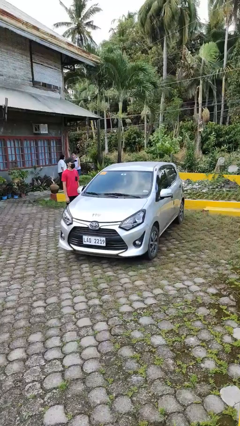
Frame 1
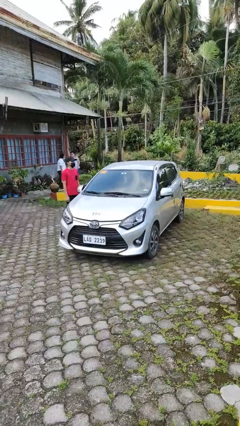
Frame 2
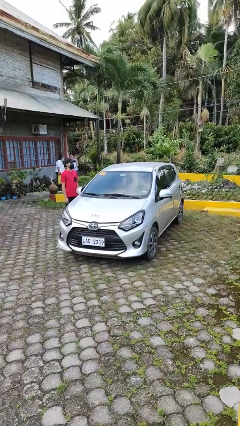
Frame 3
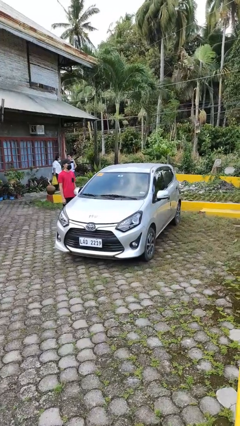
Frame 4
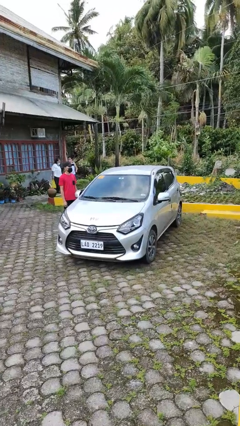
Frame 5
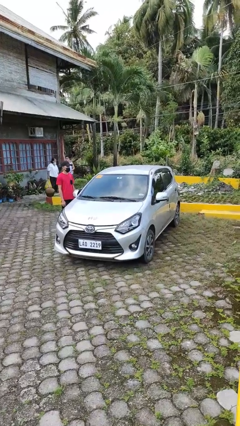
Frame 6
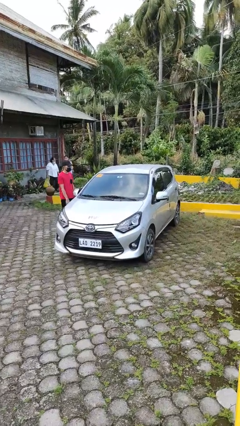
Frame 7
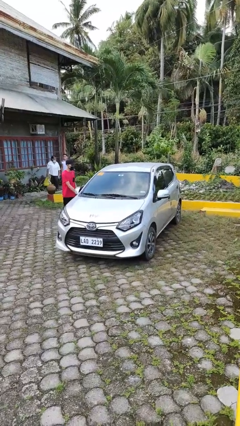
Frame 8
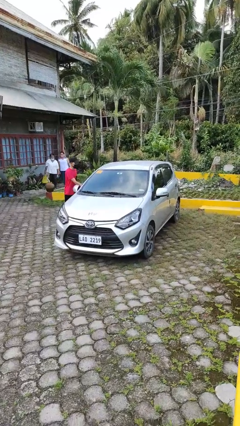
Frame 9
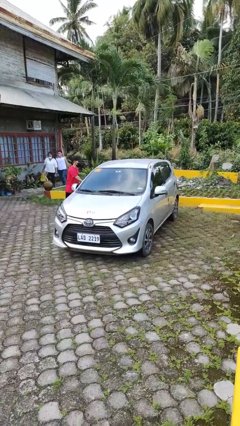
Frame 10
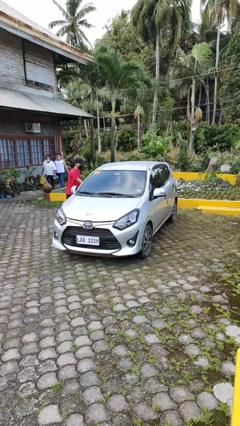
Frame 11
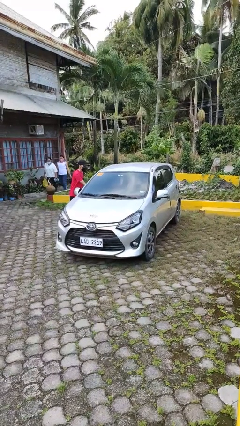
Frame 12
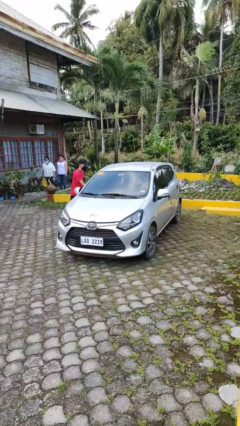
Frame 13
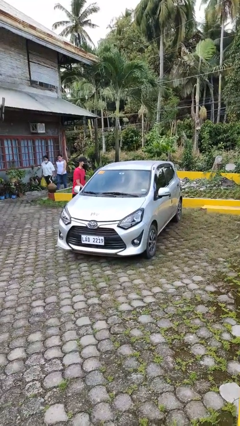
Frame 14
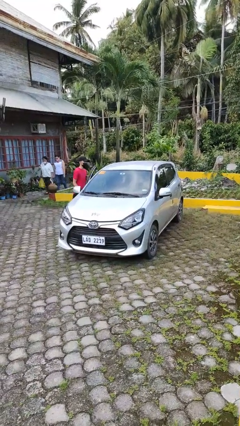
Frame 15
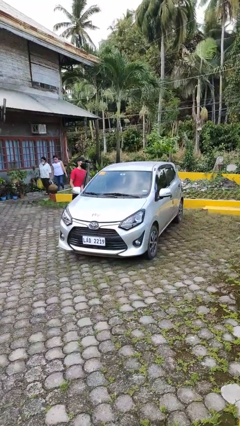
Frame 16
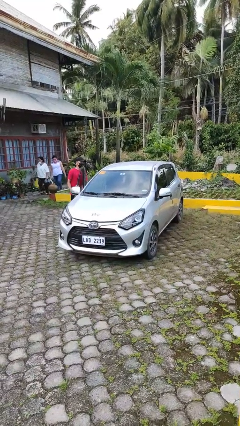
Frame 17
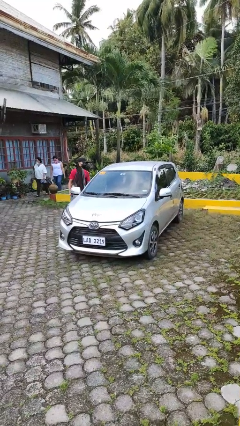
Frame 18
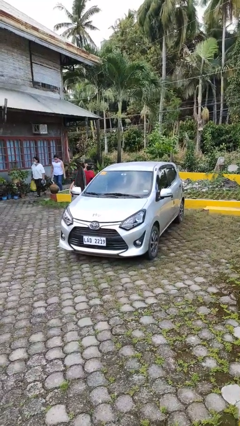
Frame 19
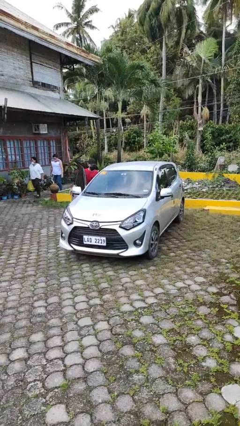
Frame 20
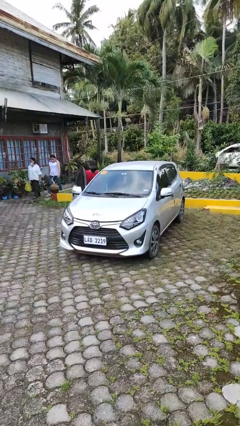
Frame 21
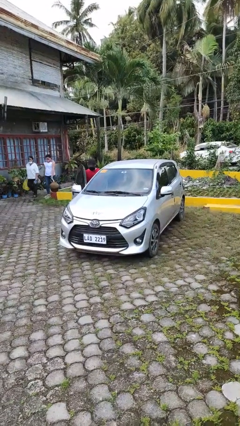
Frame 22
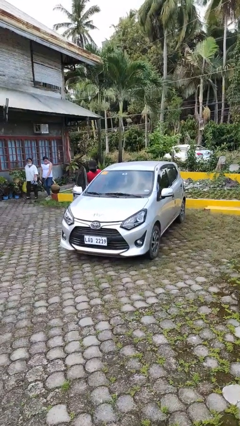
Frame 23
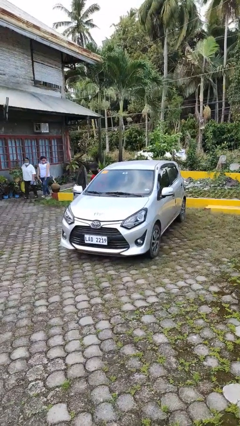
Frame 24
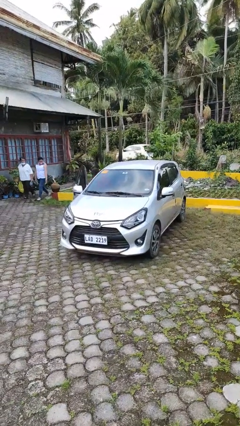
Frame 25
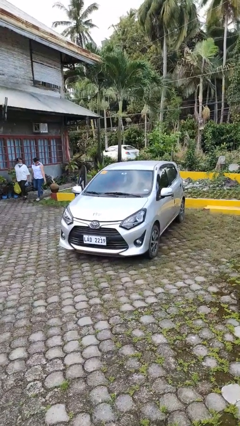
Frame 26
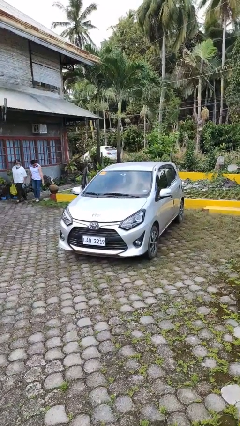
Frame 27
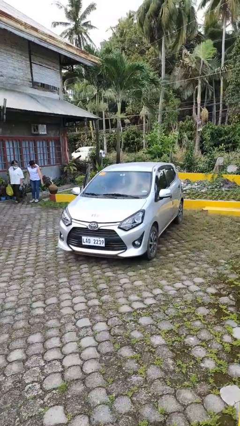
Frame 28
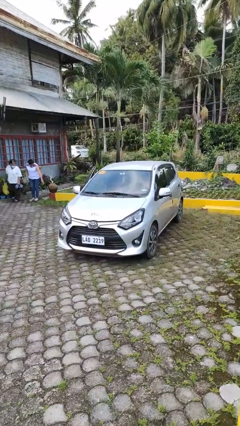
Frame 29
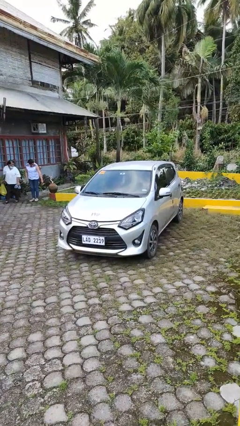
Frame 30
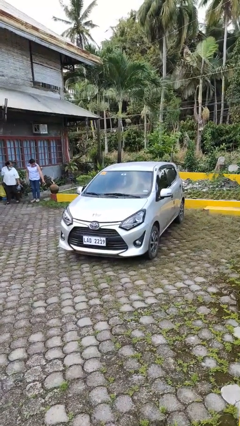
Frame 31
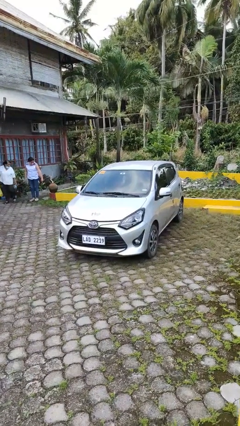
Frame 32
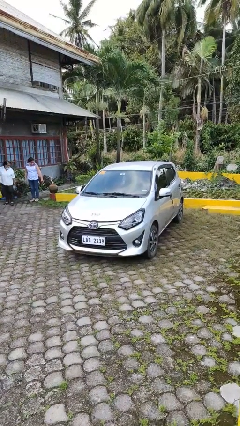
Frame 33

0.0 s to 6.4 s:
car picks up person

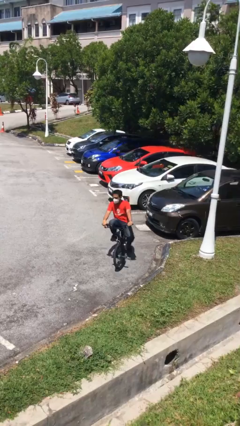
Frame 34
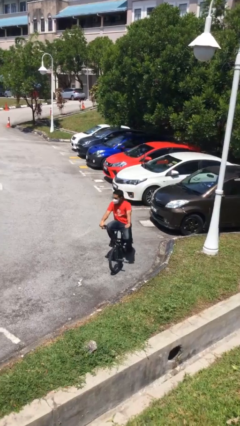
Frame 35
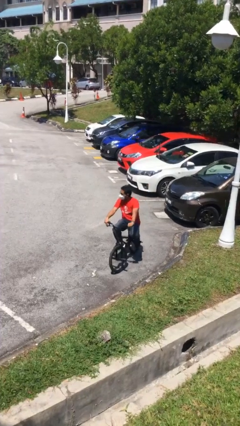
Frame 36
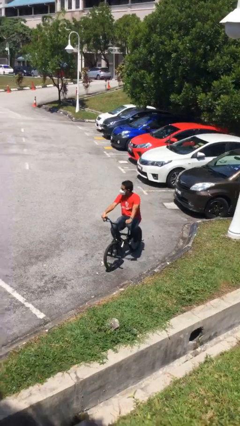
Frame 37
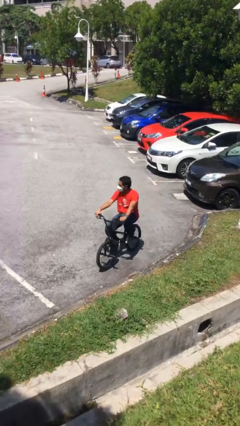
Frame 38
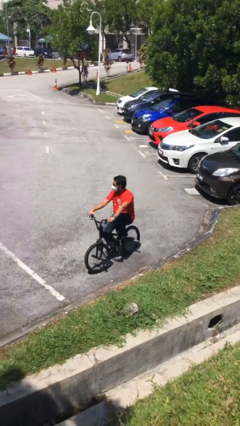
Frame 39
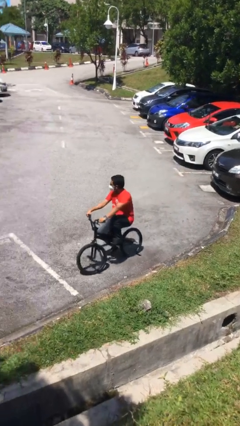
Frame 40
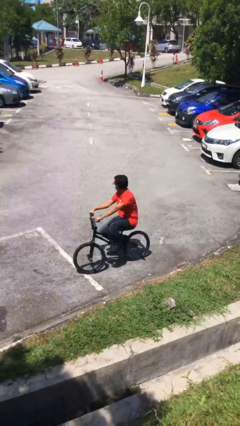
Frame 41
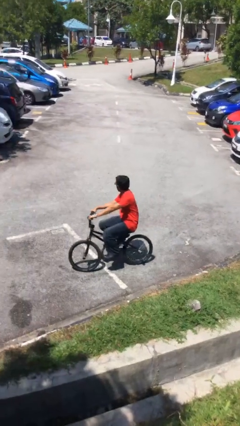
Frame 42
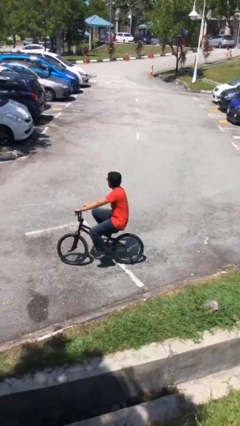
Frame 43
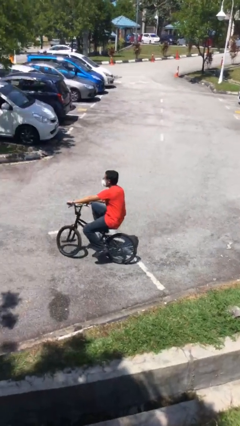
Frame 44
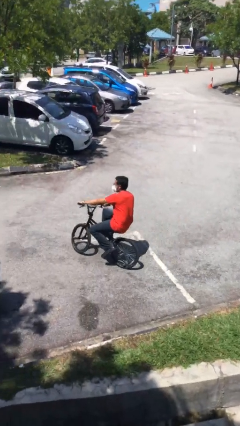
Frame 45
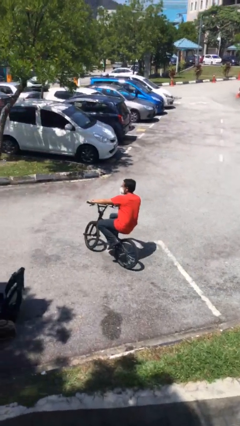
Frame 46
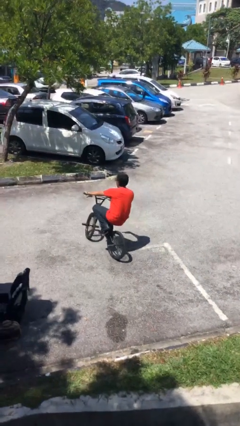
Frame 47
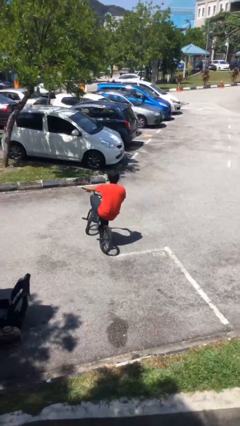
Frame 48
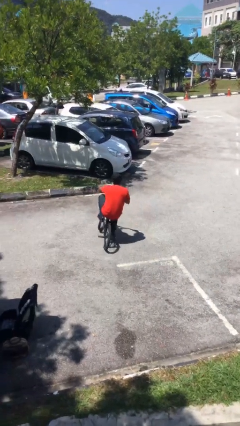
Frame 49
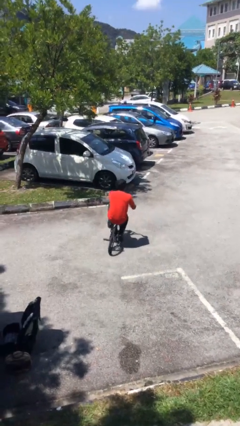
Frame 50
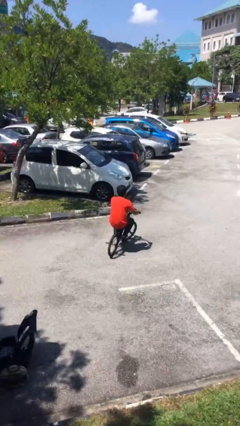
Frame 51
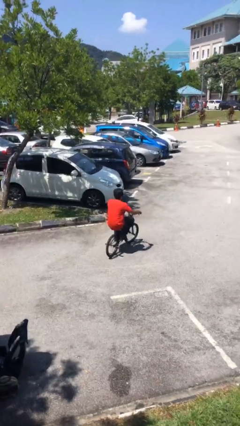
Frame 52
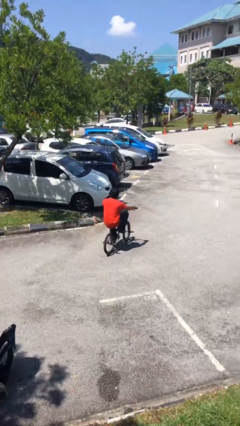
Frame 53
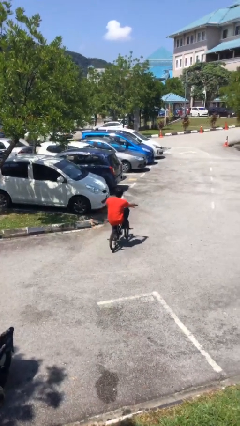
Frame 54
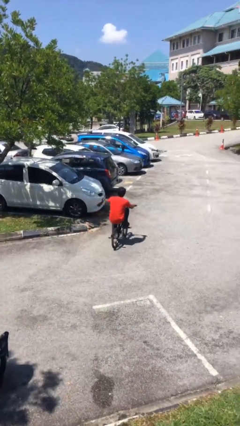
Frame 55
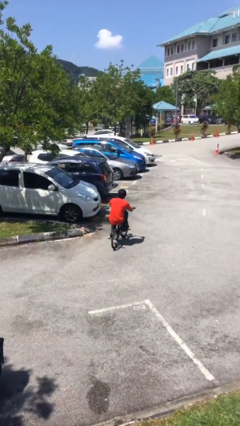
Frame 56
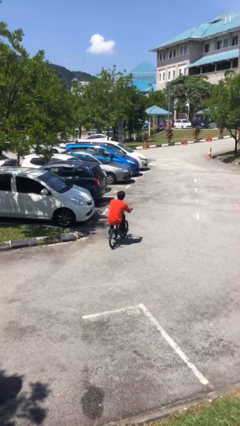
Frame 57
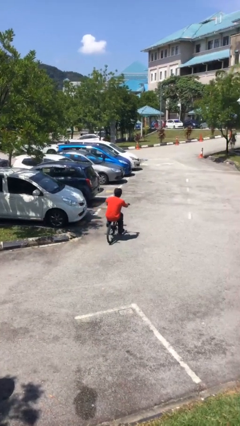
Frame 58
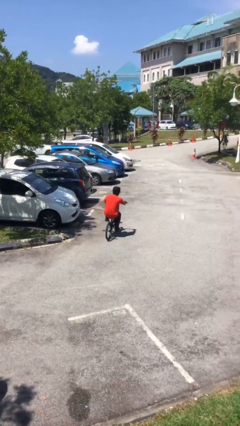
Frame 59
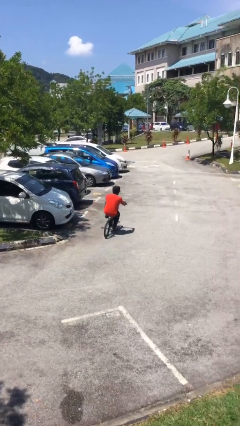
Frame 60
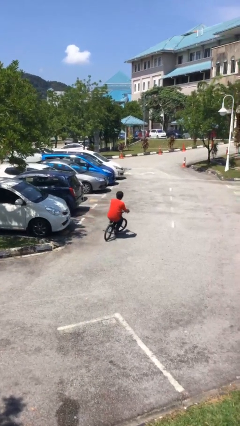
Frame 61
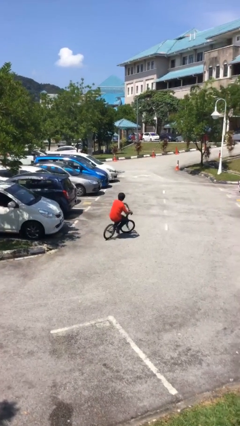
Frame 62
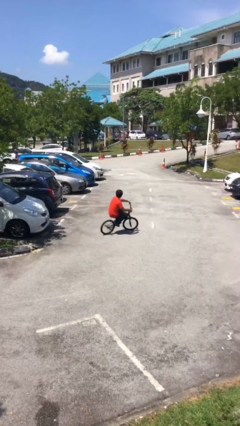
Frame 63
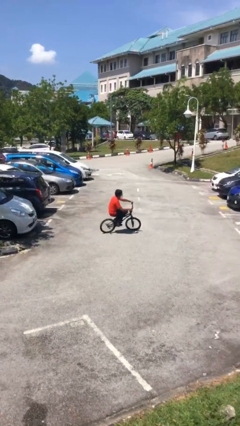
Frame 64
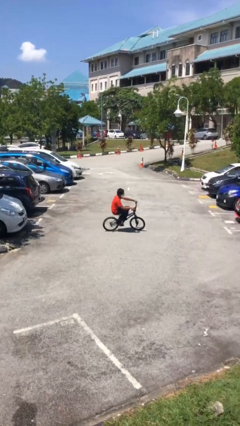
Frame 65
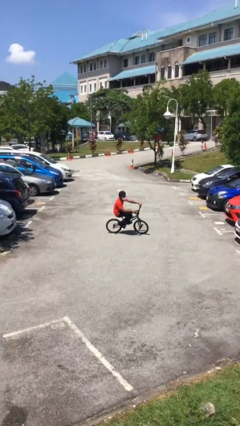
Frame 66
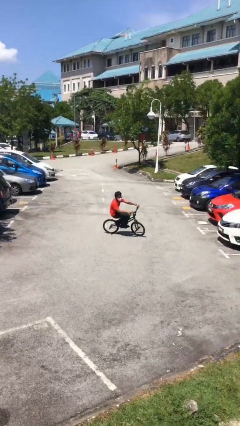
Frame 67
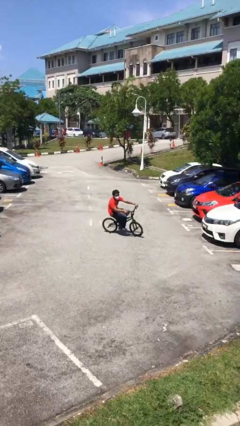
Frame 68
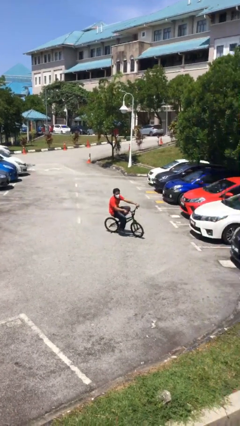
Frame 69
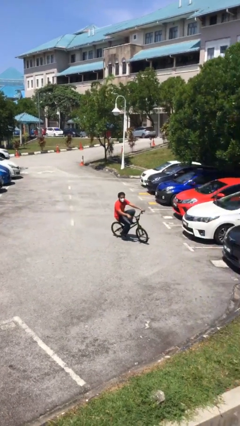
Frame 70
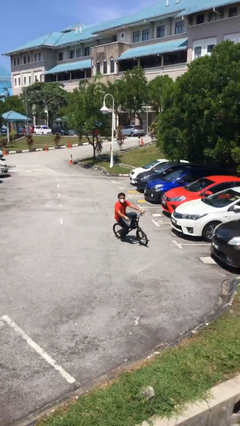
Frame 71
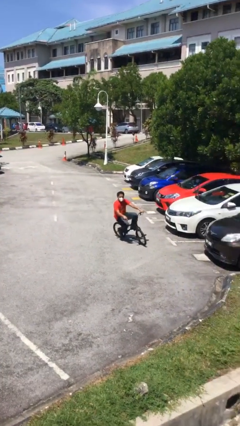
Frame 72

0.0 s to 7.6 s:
person rides bicycle

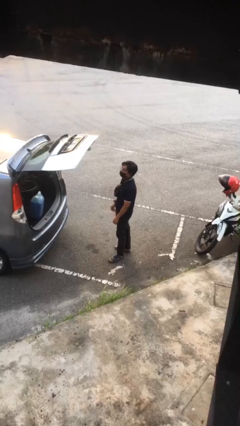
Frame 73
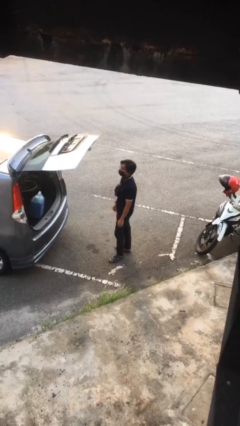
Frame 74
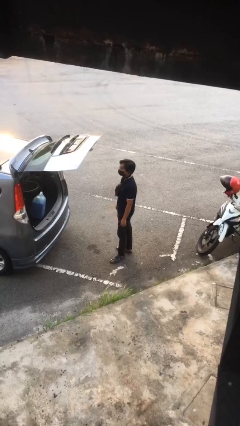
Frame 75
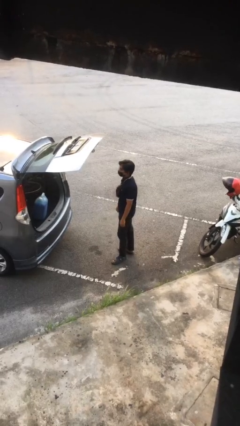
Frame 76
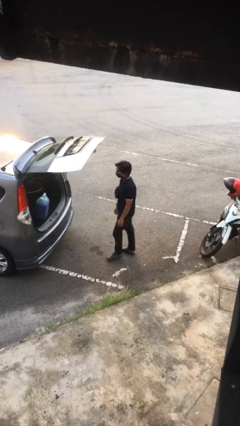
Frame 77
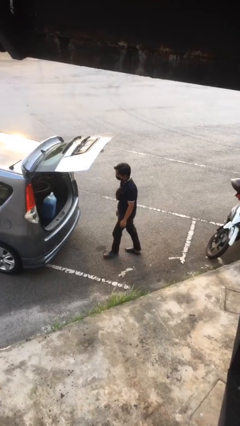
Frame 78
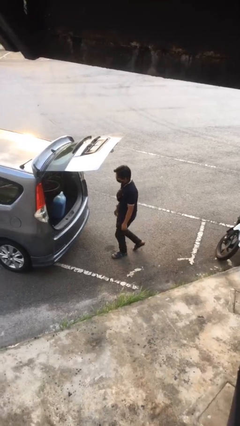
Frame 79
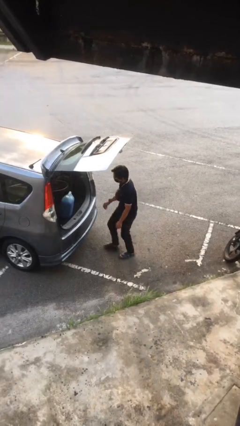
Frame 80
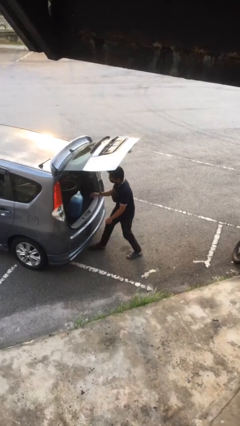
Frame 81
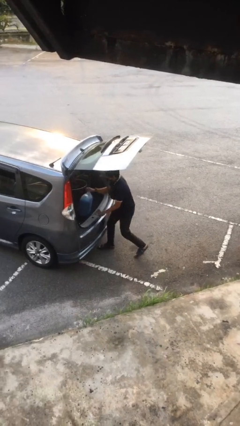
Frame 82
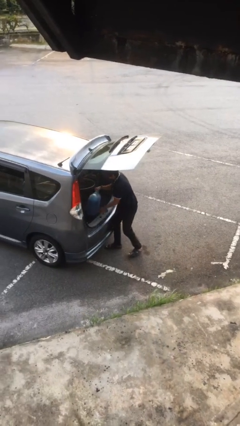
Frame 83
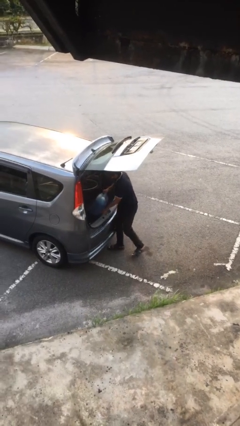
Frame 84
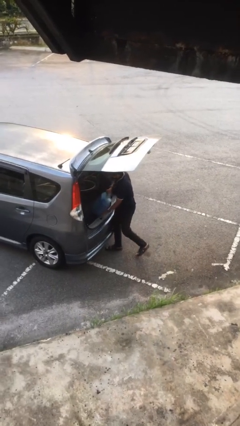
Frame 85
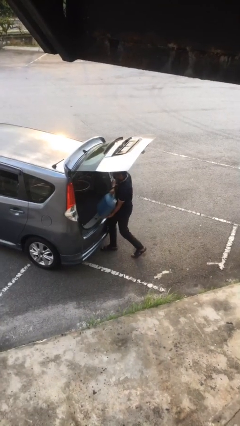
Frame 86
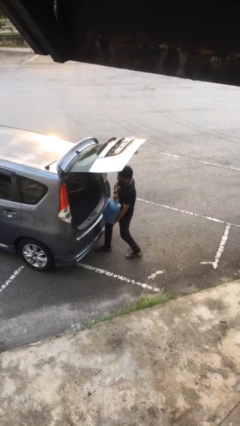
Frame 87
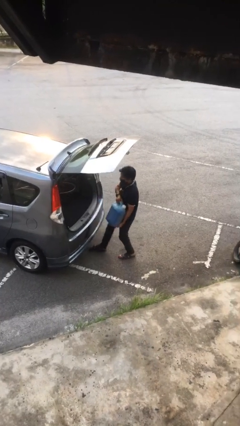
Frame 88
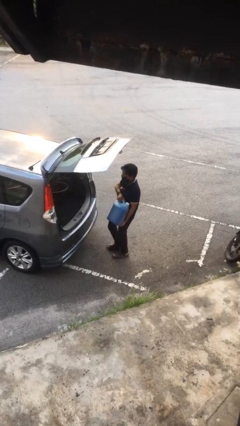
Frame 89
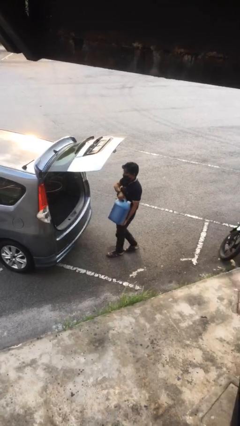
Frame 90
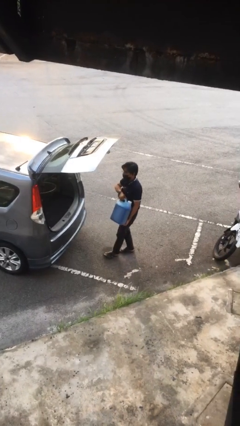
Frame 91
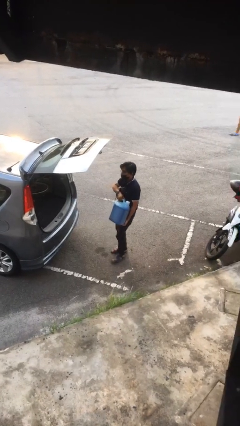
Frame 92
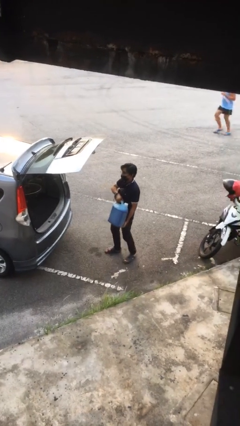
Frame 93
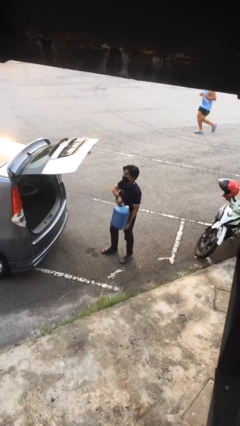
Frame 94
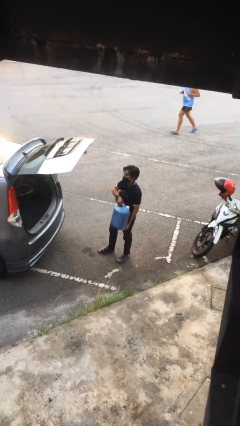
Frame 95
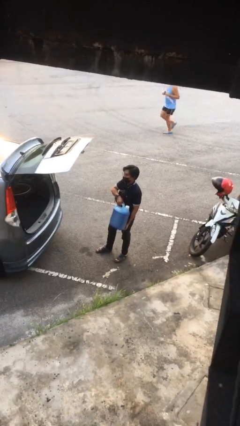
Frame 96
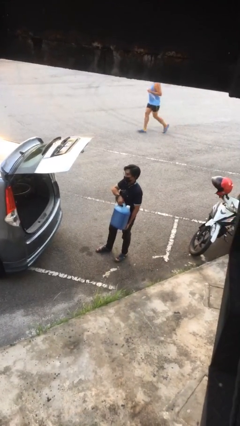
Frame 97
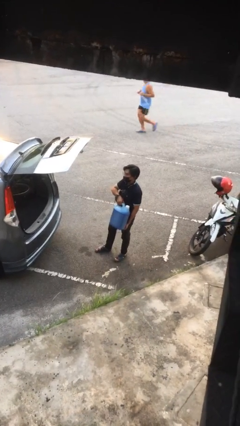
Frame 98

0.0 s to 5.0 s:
person unloads car
